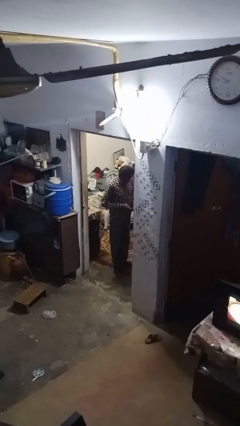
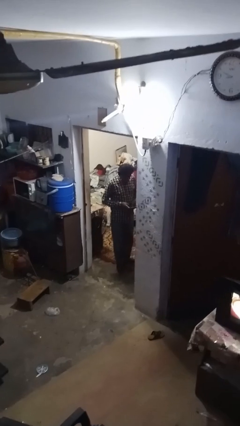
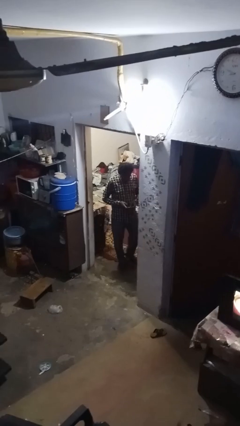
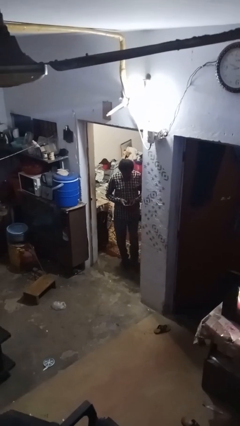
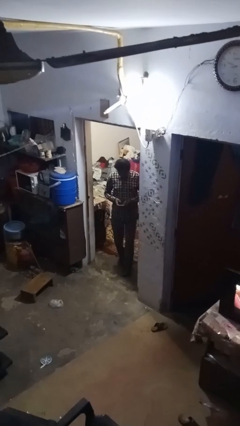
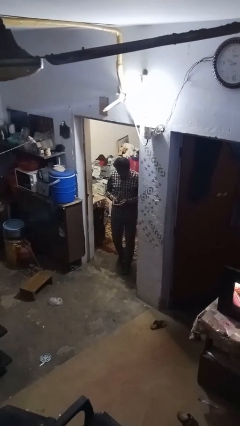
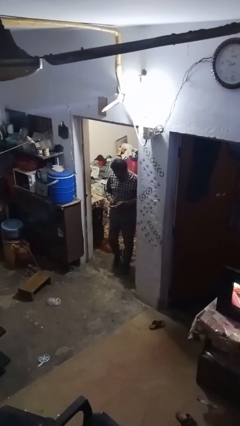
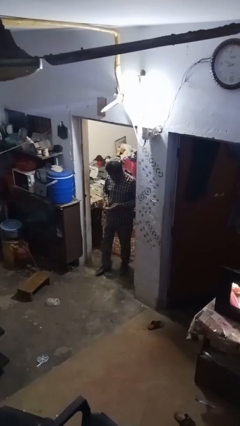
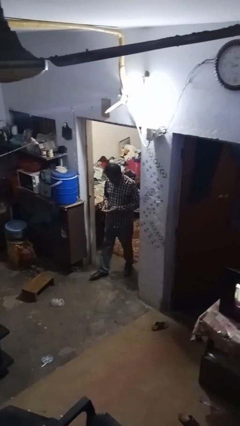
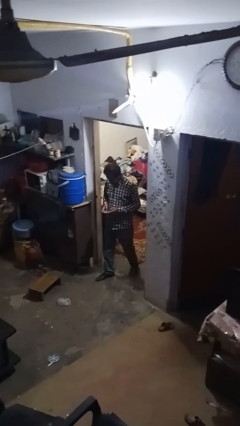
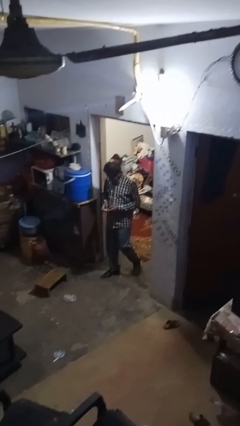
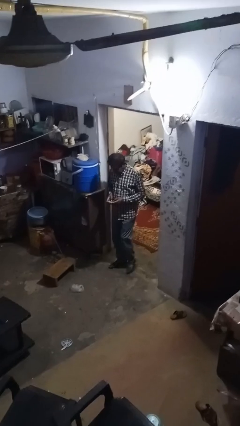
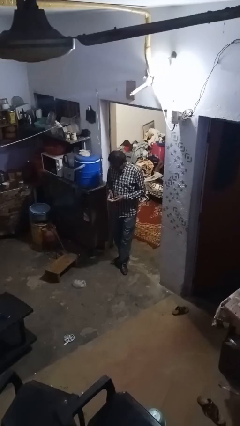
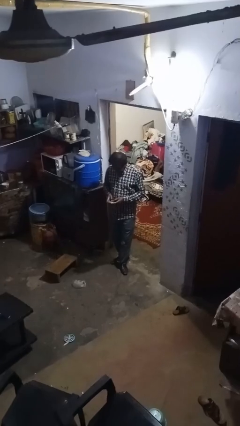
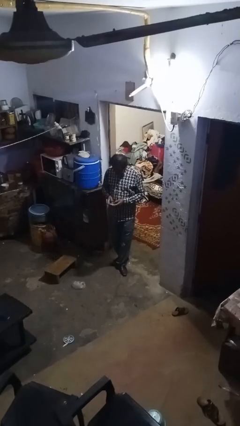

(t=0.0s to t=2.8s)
person enters scene through structure

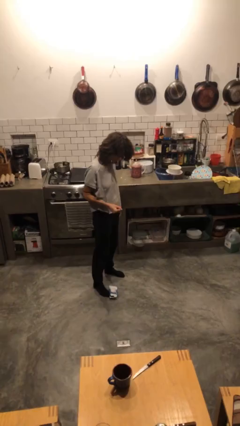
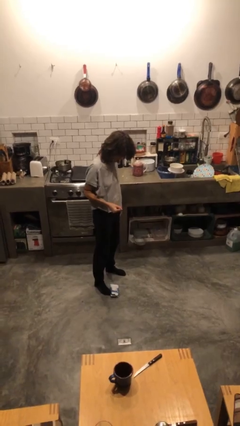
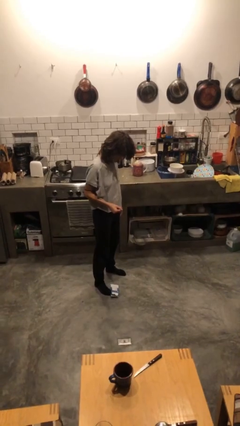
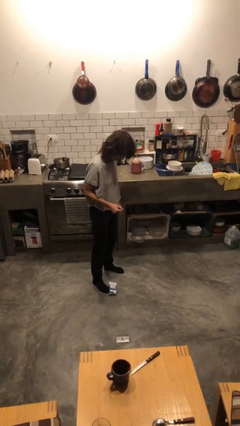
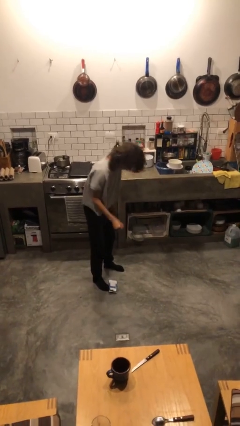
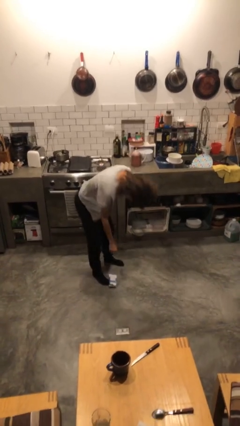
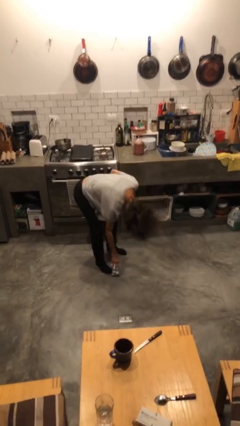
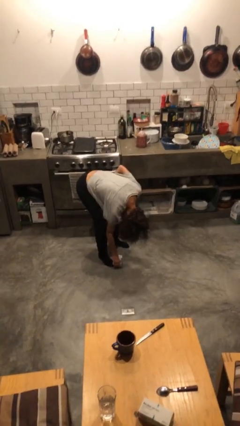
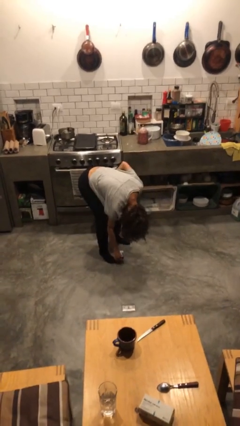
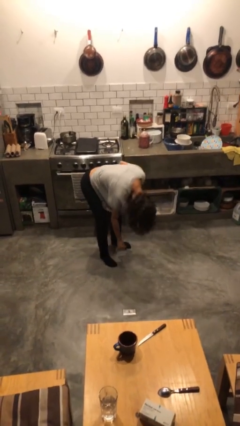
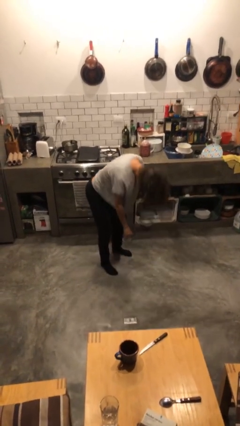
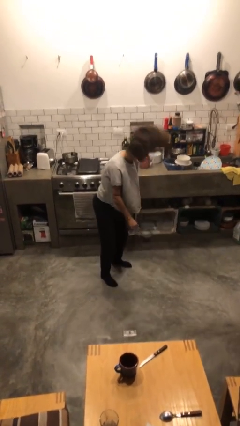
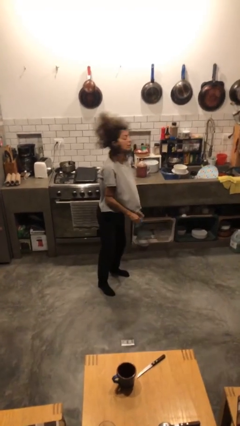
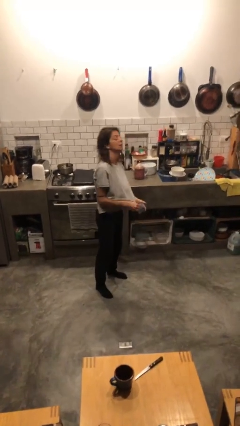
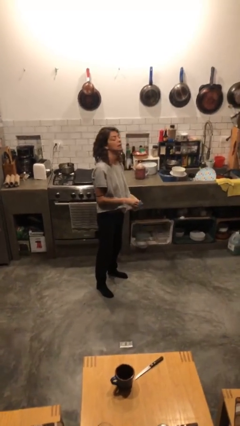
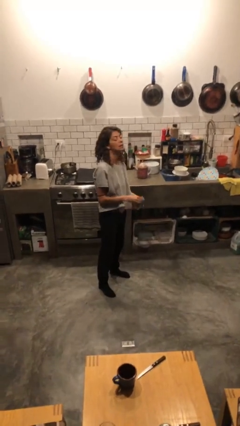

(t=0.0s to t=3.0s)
person picks up object from floor

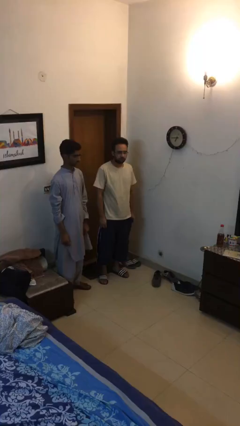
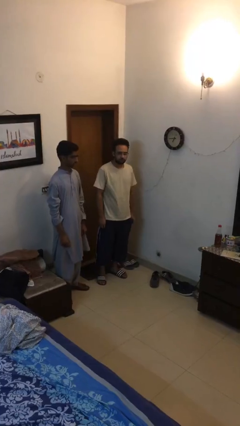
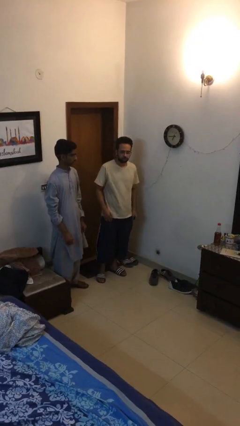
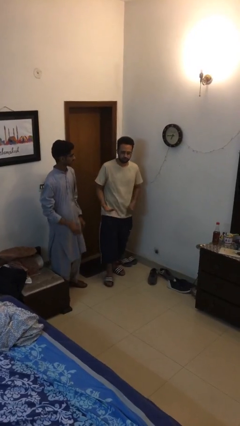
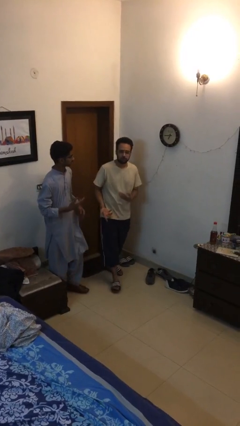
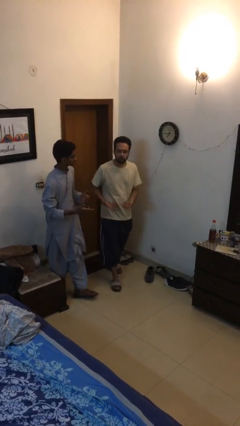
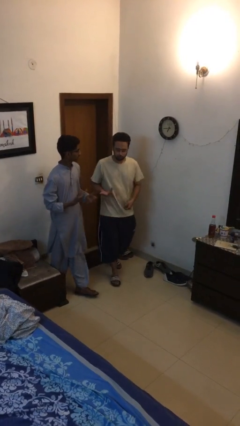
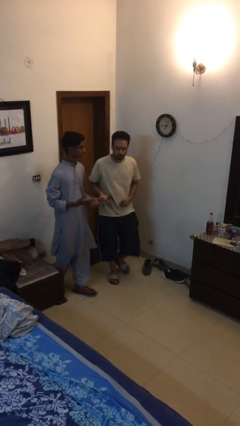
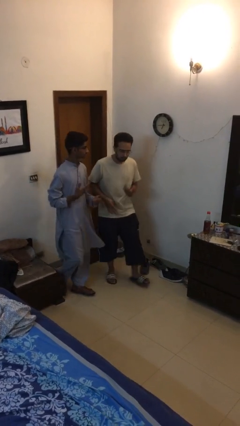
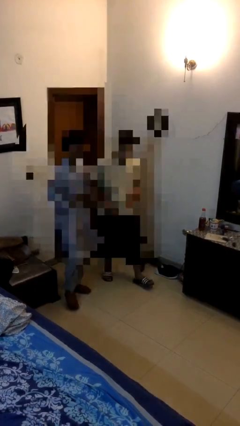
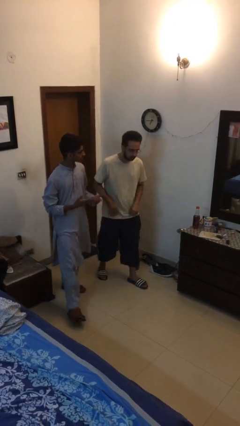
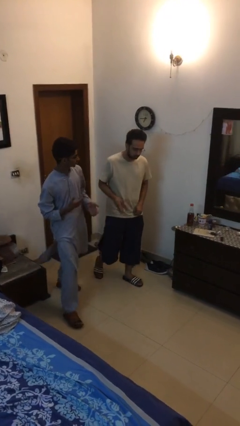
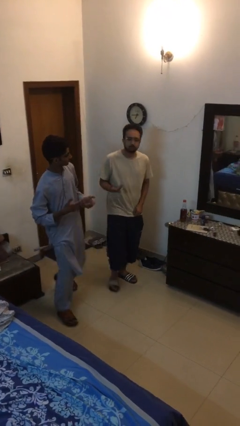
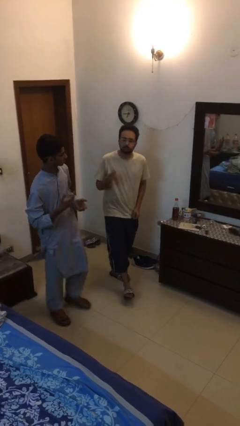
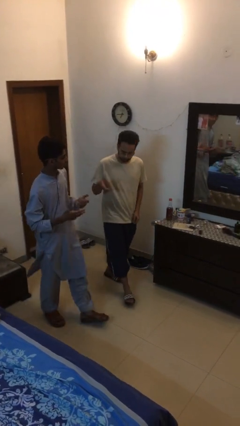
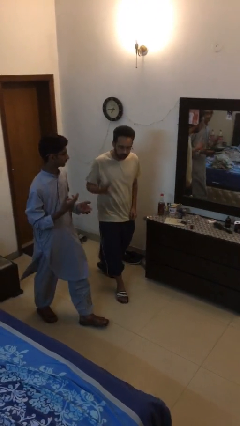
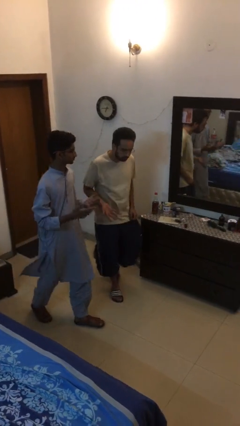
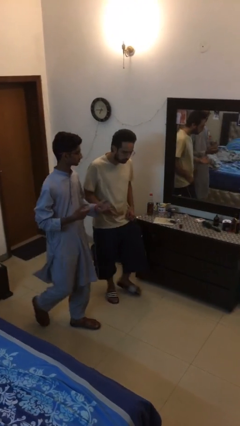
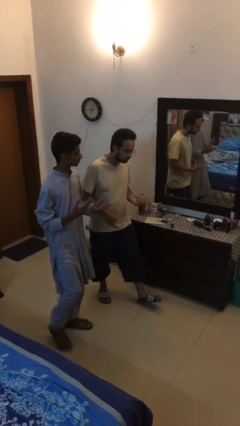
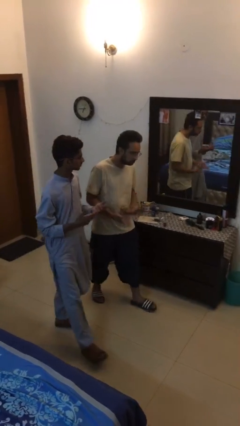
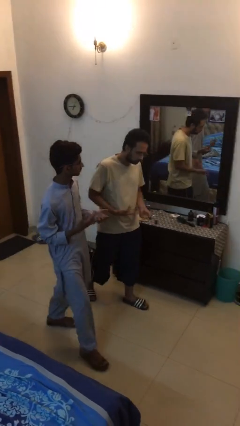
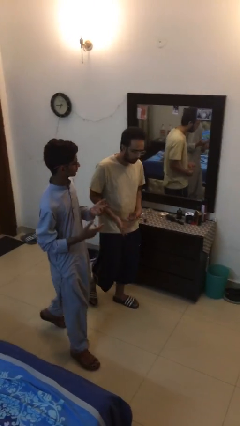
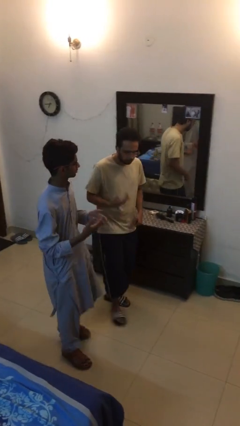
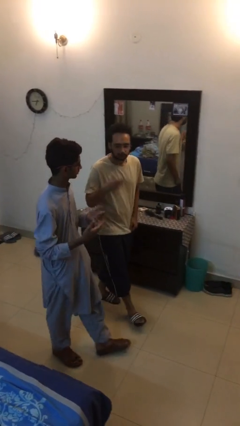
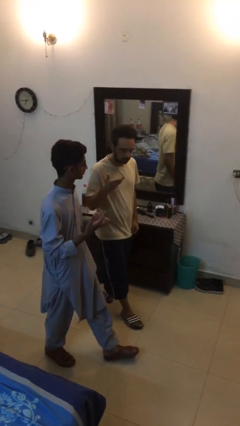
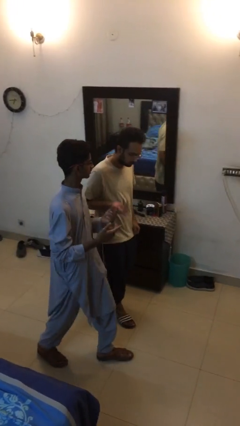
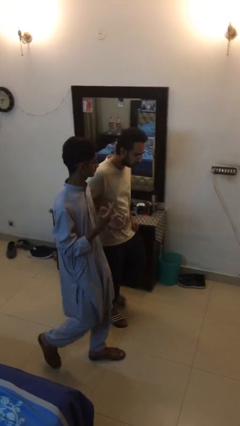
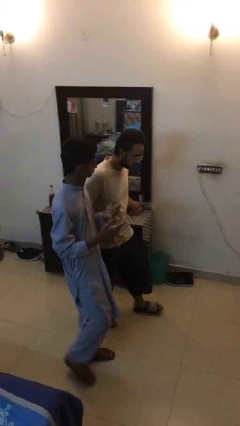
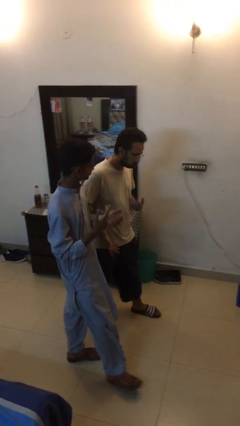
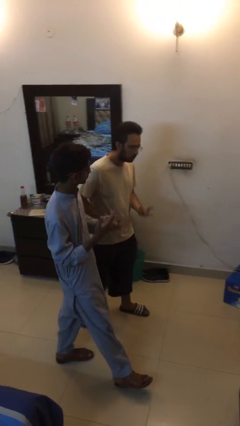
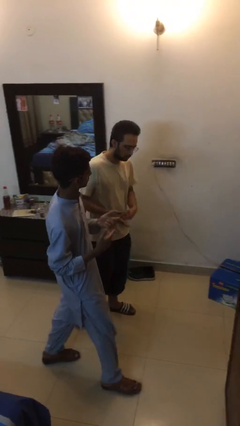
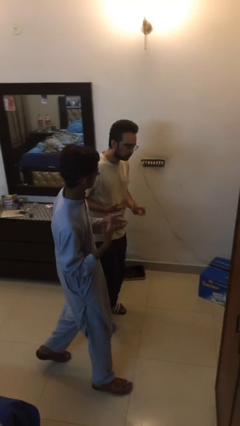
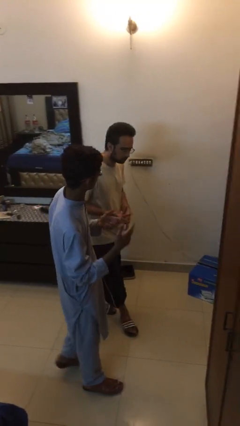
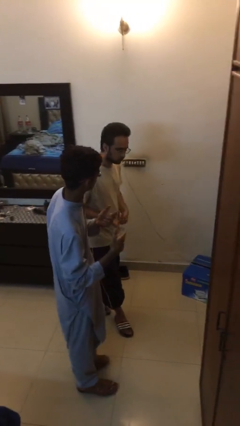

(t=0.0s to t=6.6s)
person talks to person

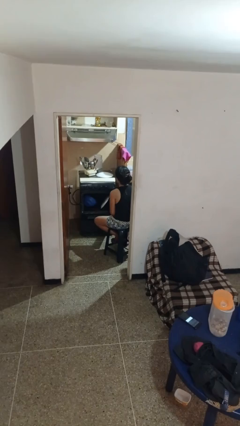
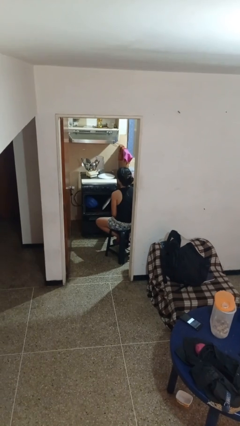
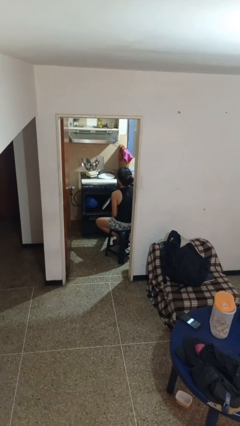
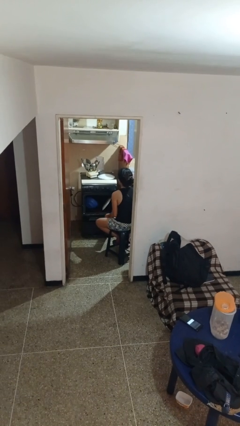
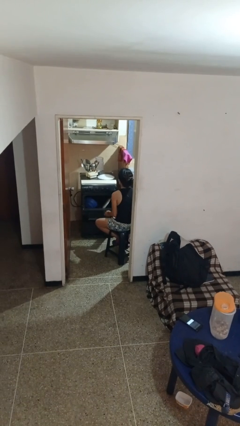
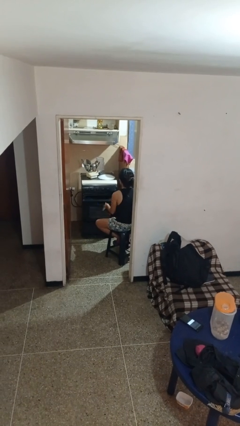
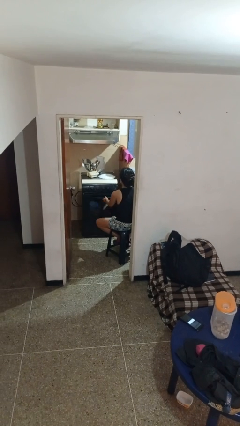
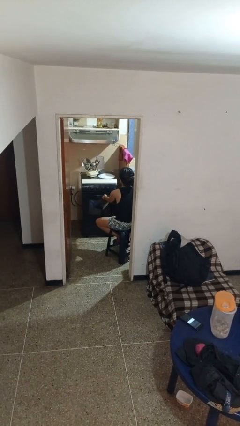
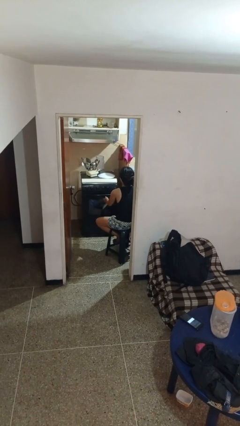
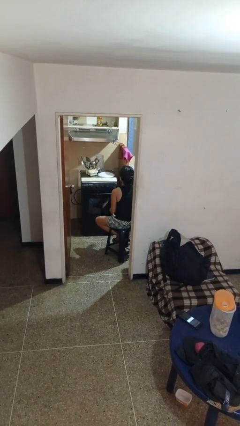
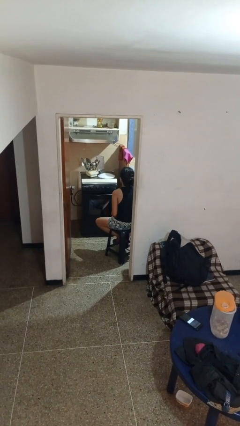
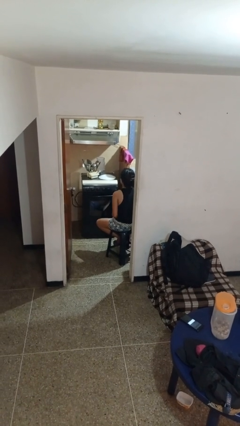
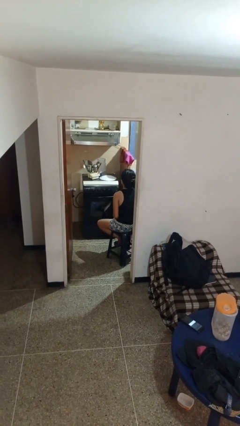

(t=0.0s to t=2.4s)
person closes dishwasher

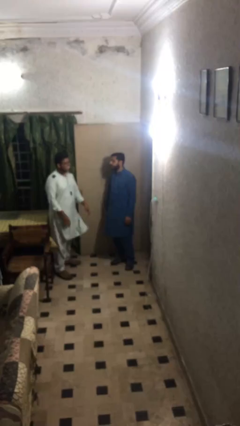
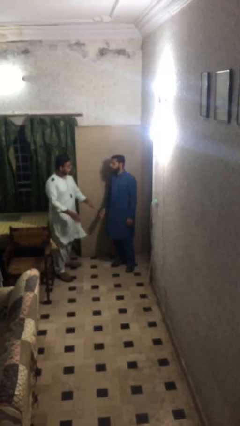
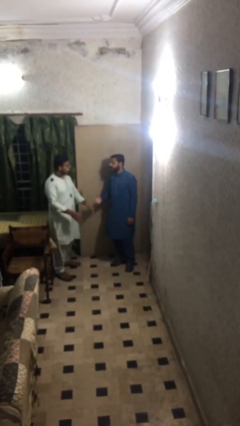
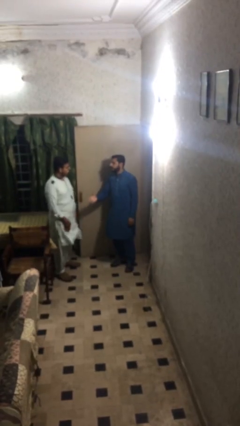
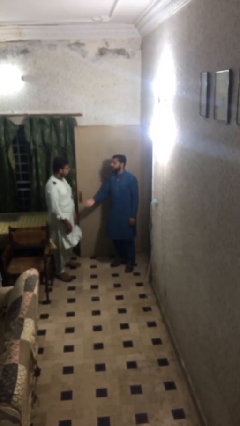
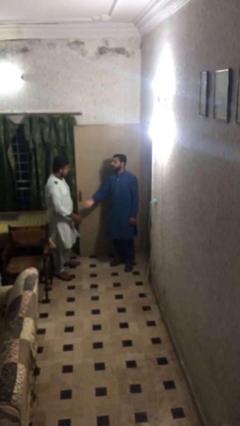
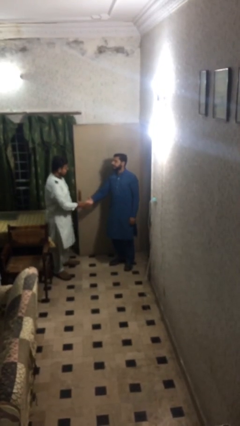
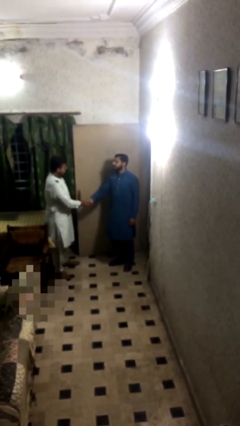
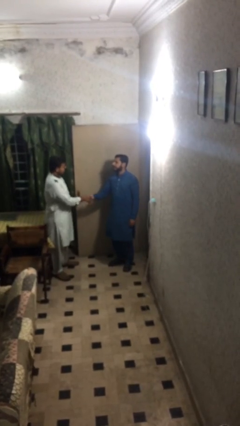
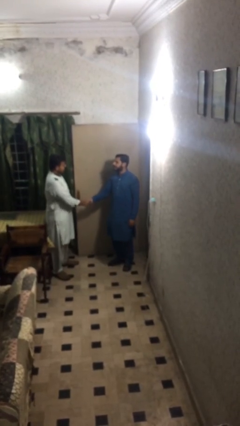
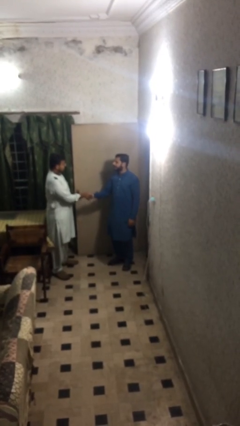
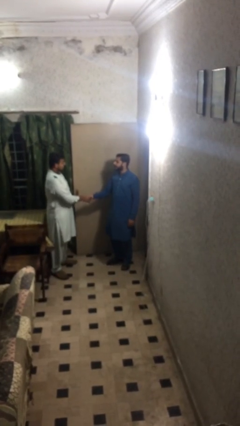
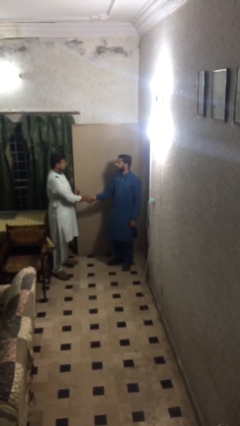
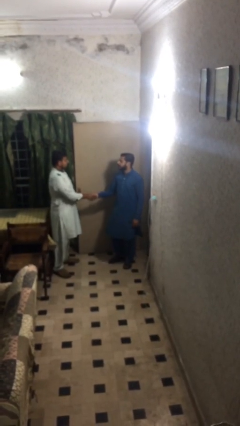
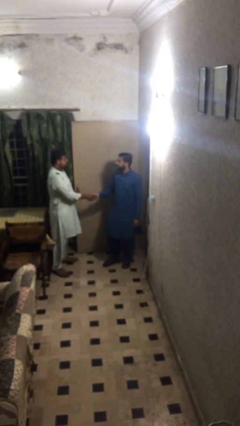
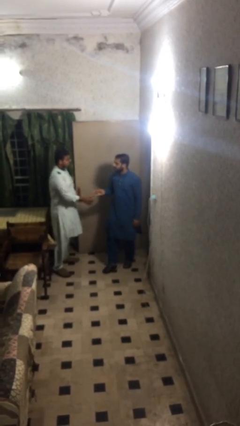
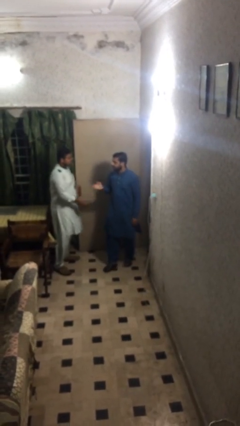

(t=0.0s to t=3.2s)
person shakes hand
